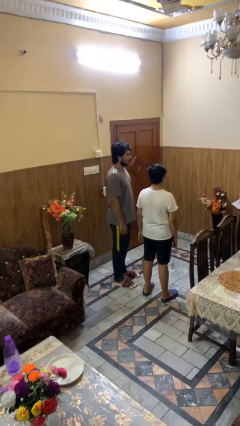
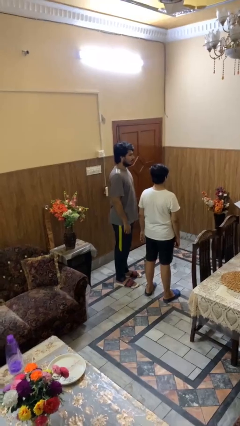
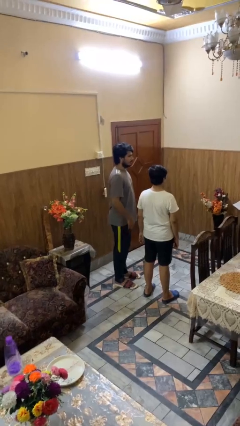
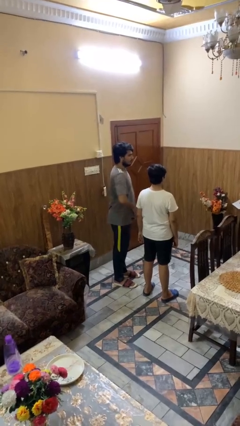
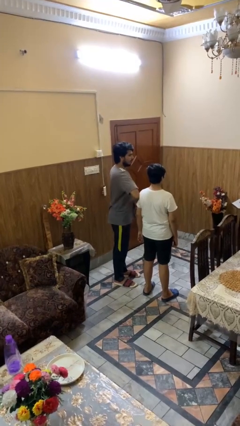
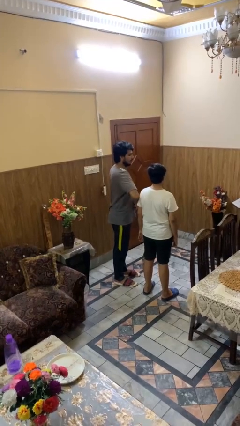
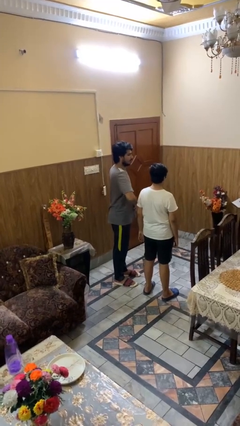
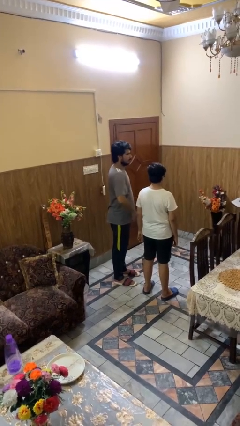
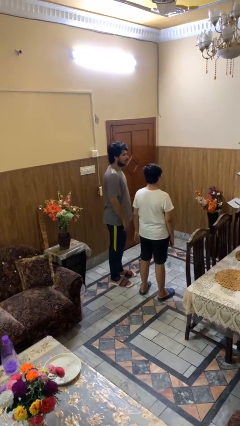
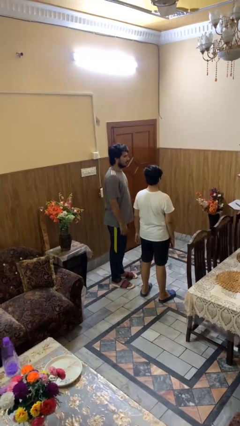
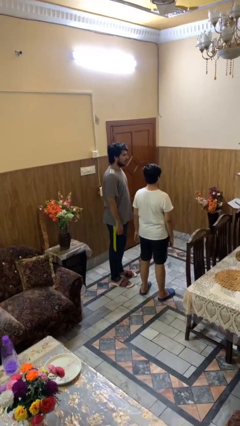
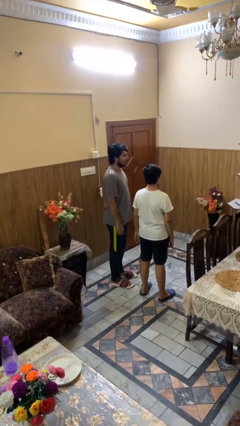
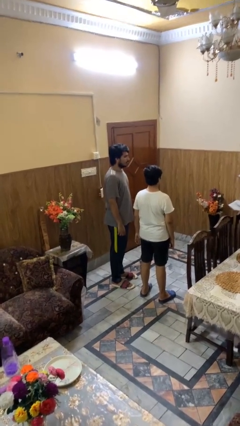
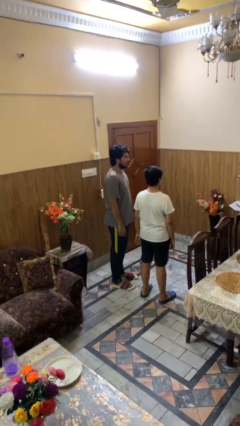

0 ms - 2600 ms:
person nudges person with elbow

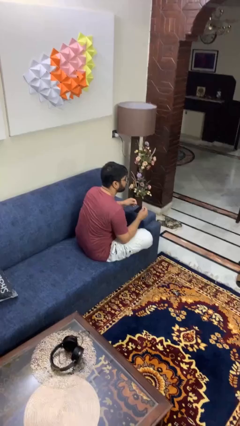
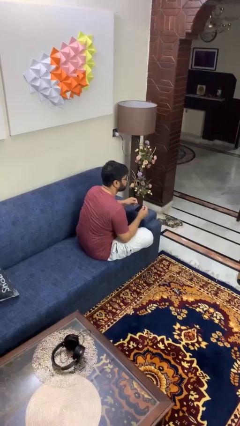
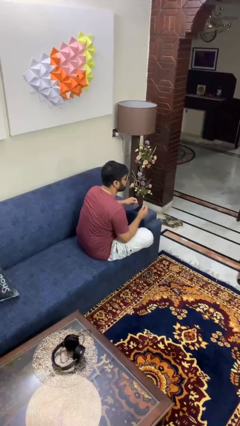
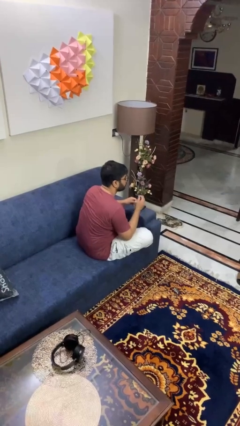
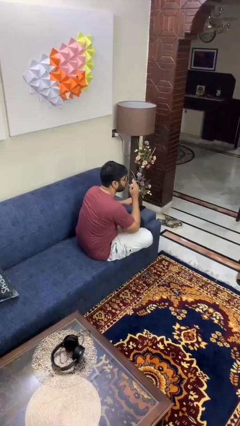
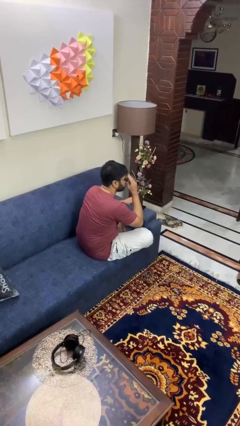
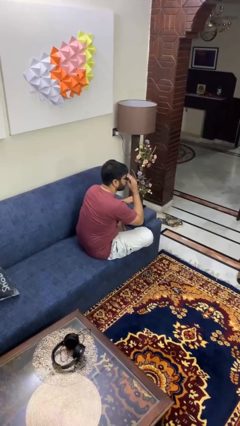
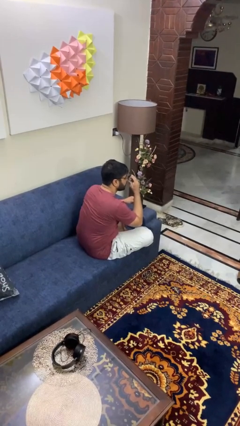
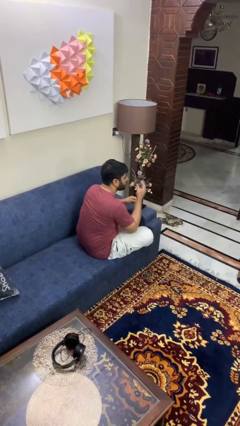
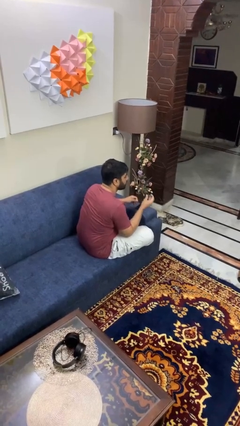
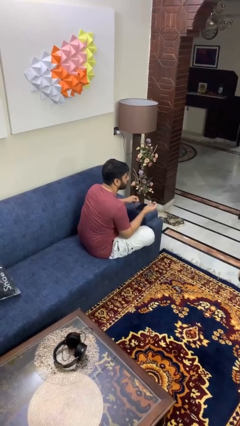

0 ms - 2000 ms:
person takes off glasses

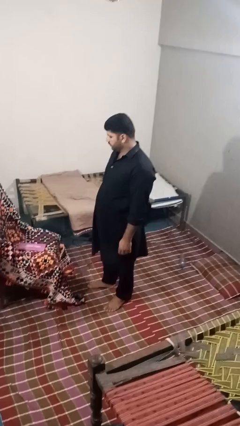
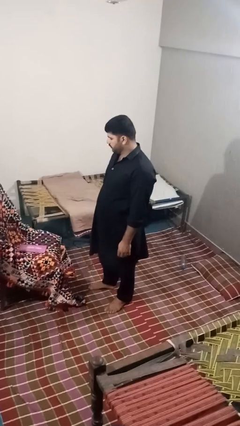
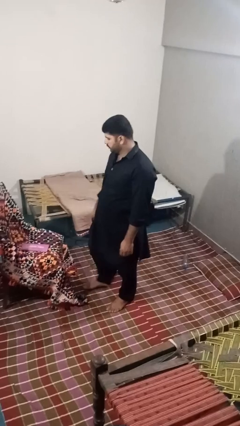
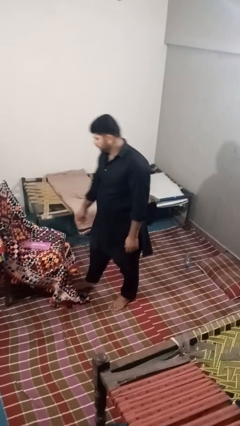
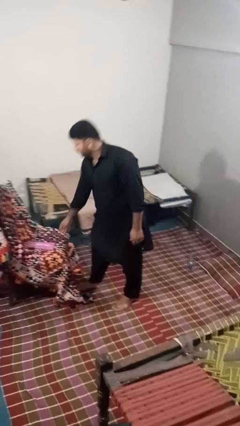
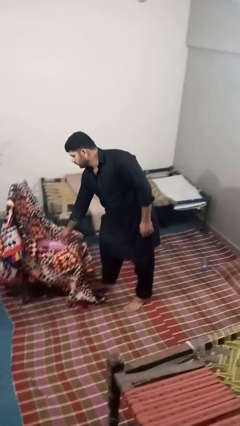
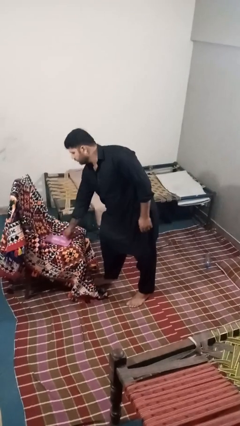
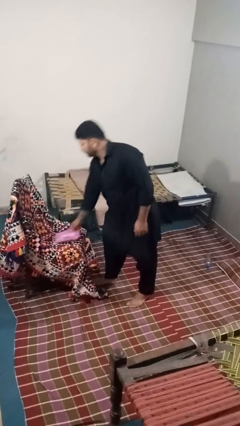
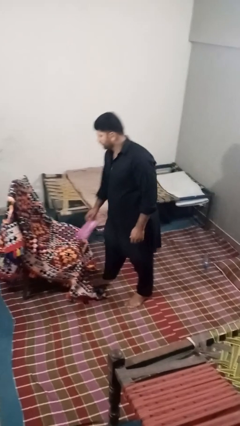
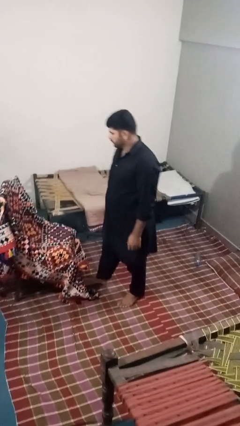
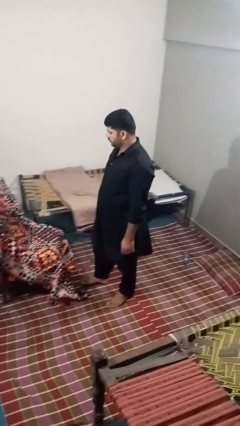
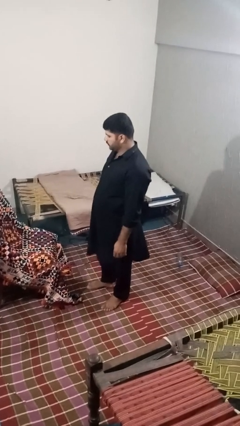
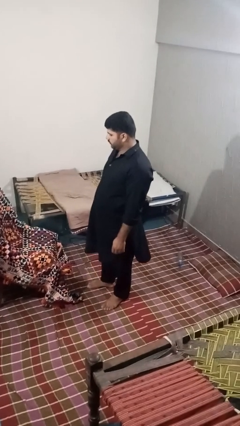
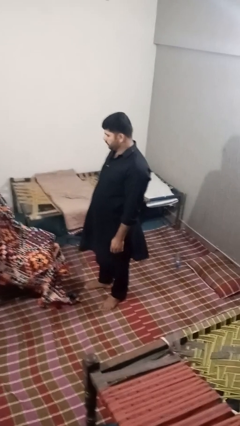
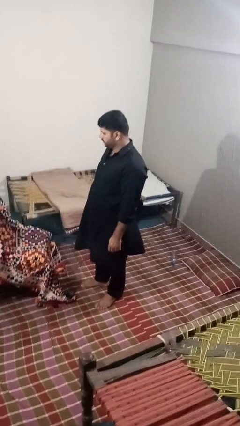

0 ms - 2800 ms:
person picks up object from couch

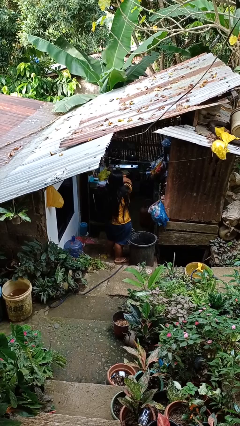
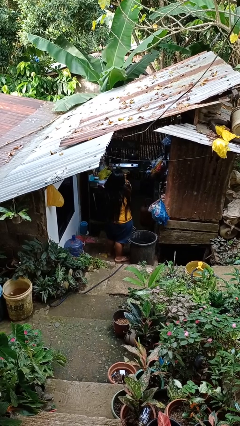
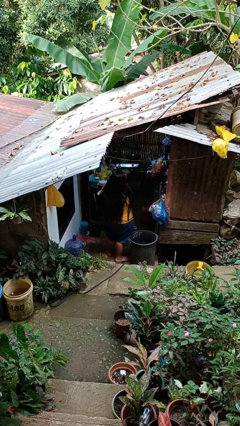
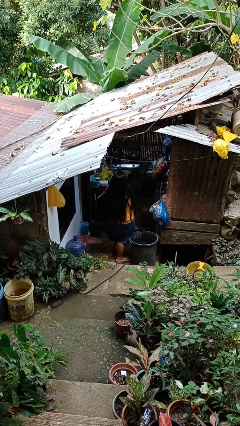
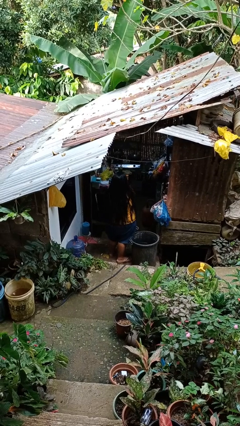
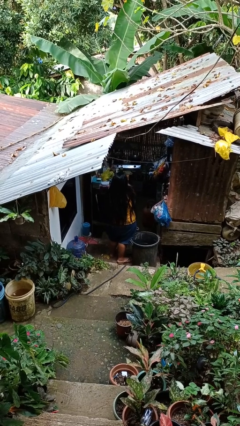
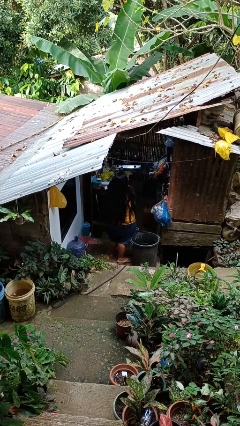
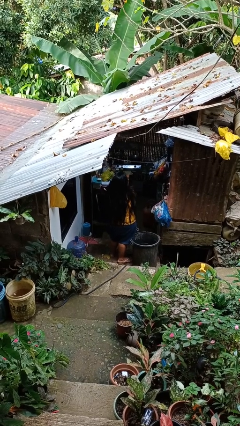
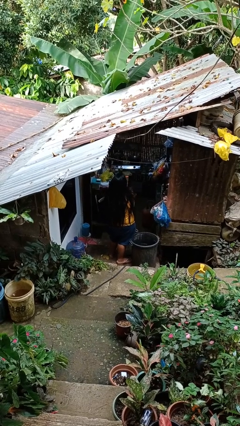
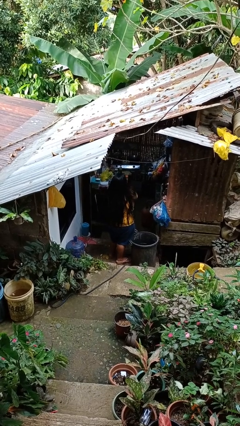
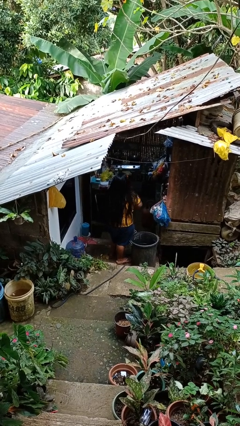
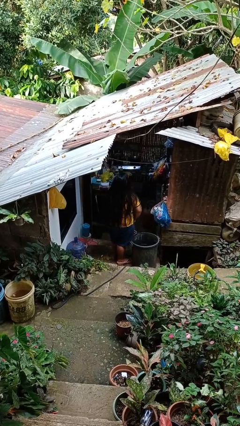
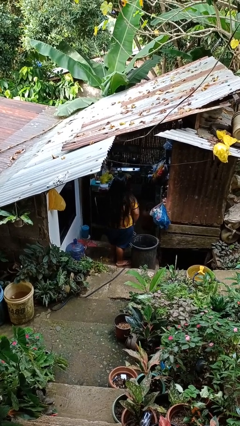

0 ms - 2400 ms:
person brushes hair

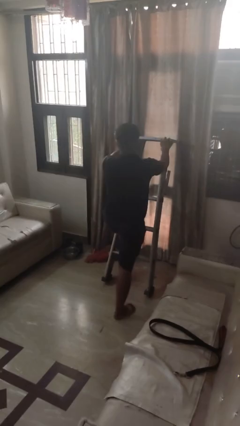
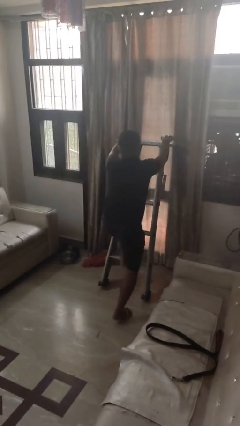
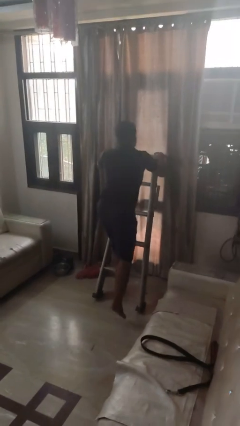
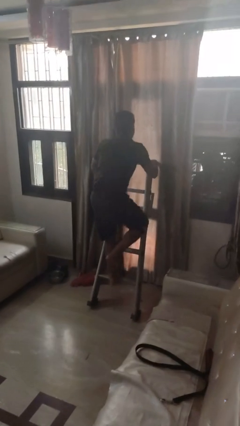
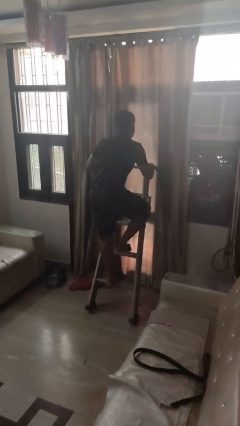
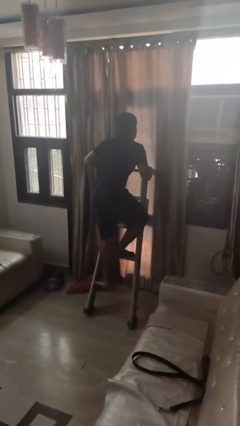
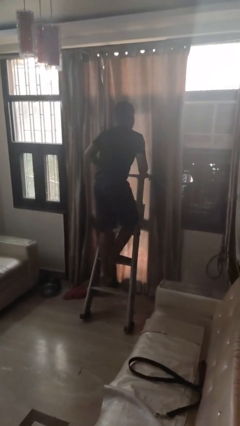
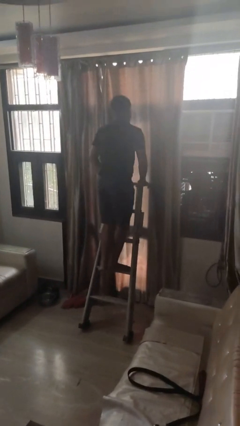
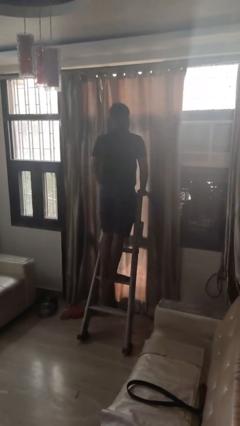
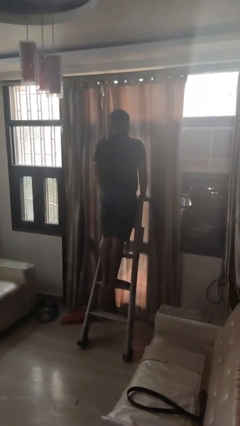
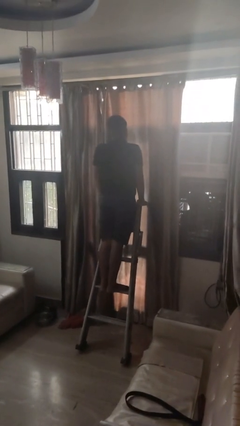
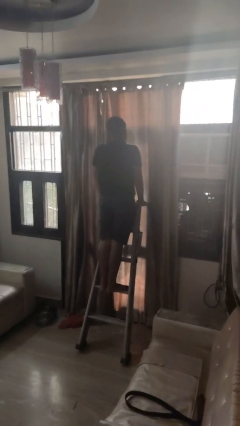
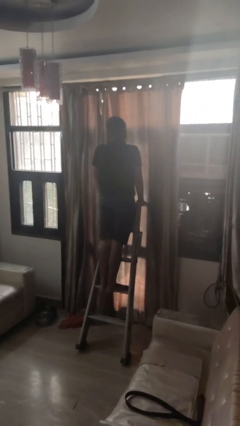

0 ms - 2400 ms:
person climbs up ladder

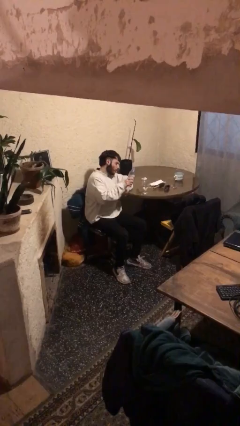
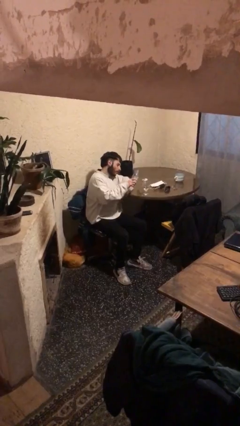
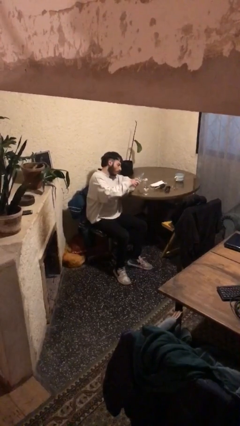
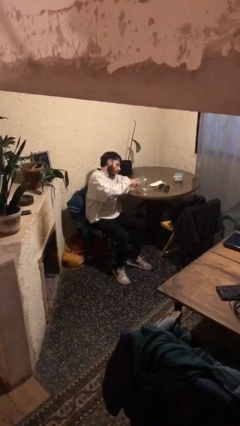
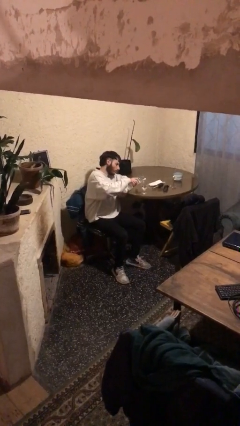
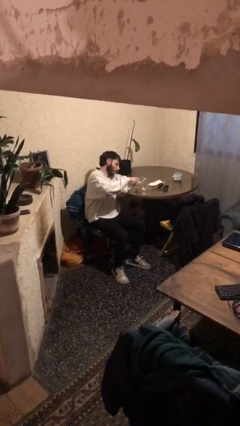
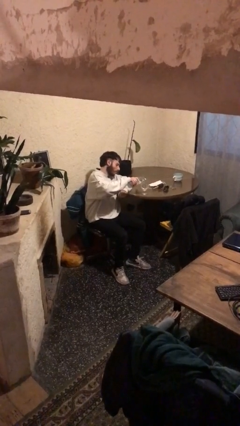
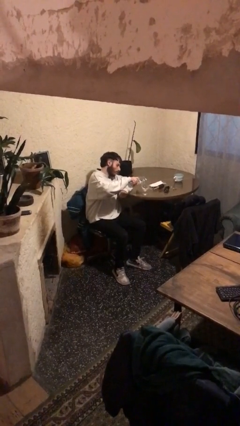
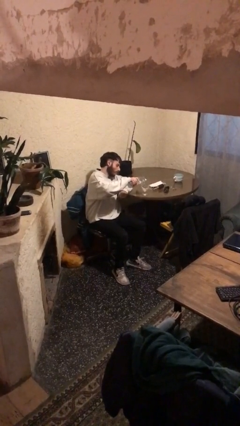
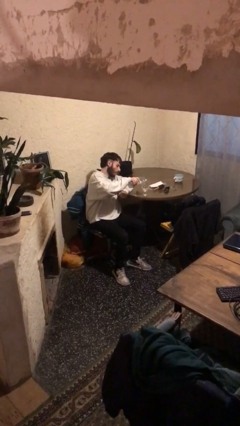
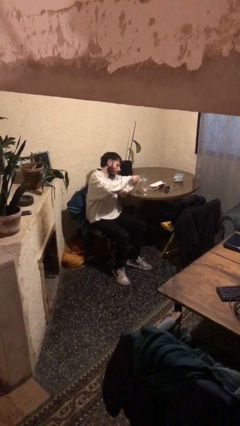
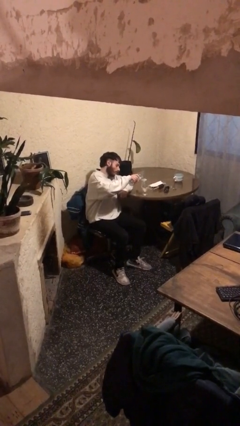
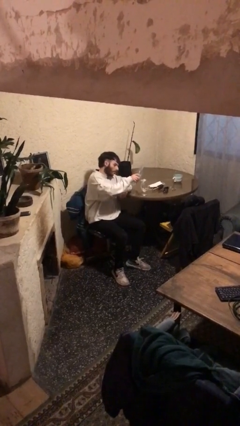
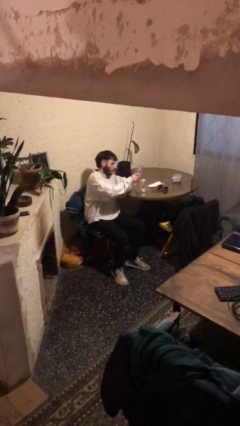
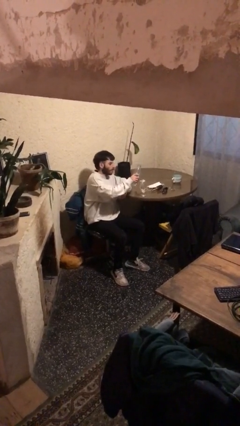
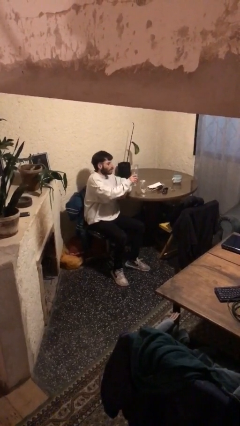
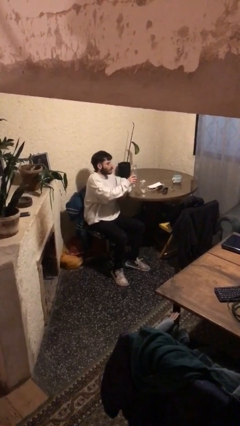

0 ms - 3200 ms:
person pours liquid into cup

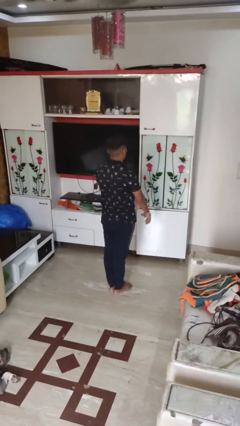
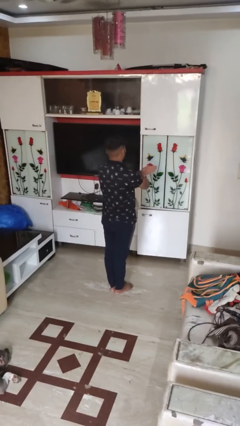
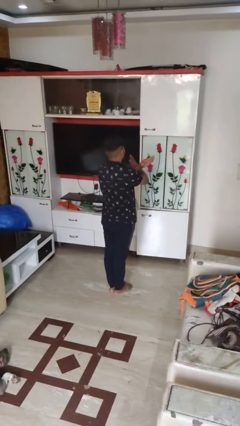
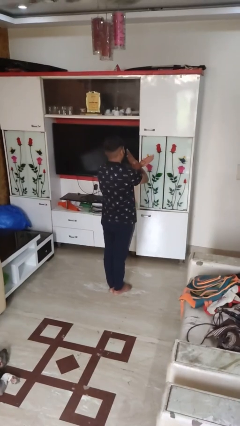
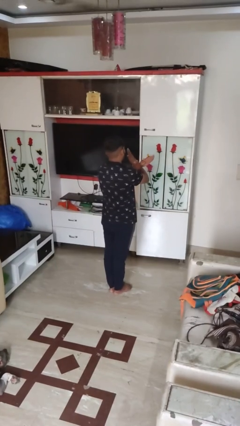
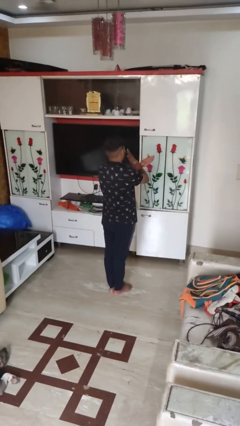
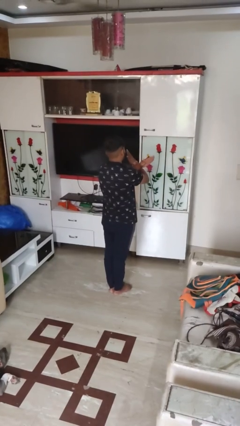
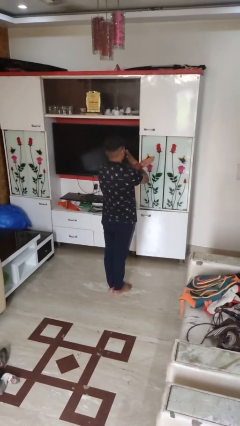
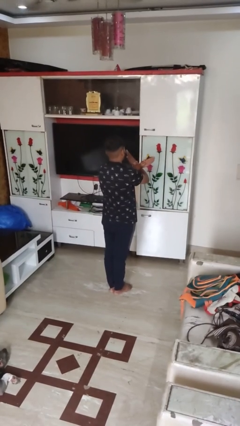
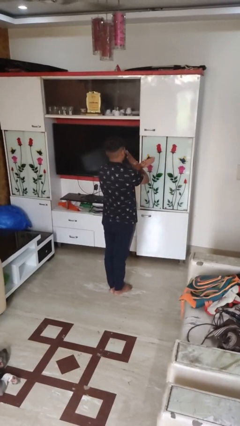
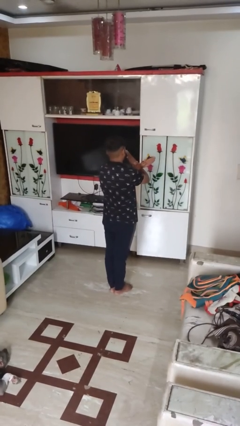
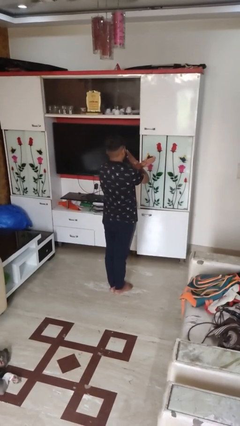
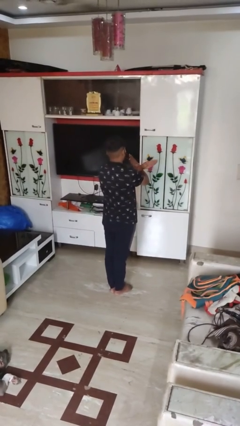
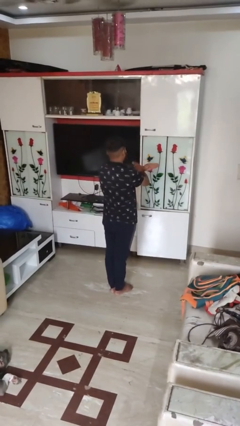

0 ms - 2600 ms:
person gestures arms x
